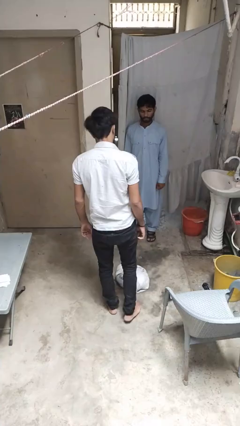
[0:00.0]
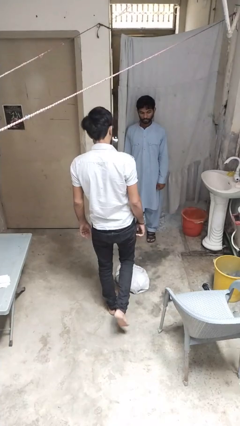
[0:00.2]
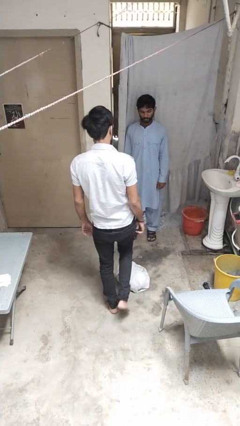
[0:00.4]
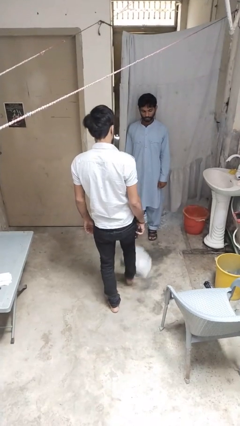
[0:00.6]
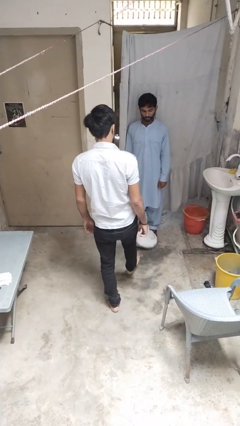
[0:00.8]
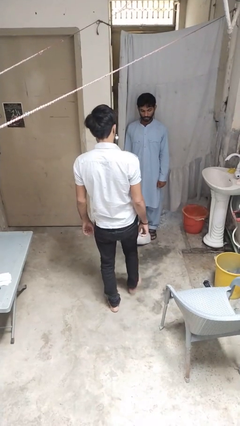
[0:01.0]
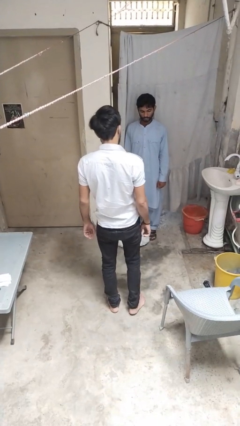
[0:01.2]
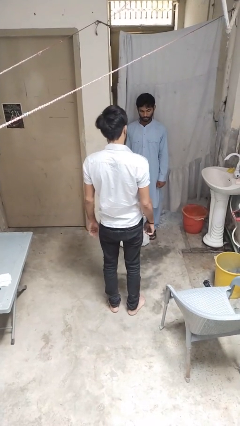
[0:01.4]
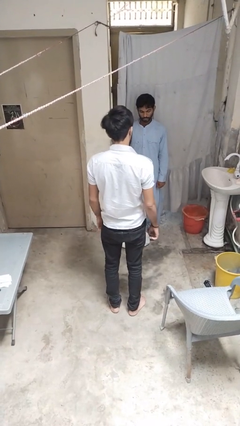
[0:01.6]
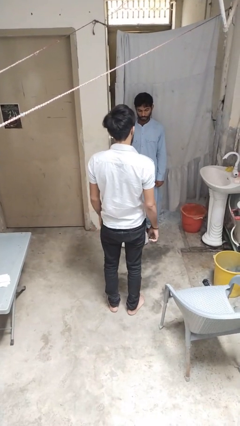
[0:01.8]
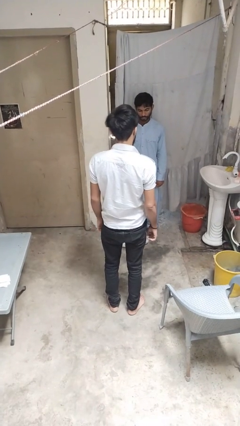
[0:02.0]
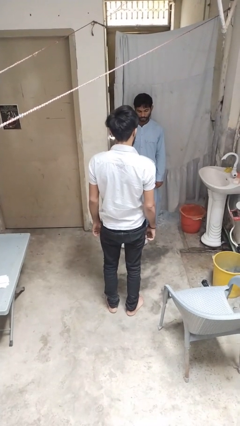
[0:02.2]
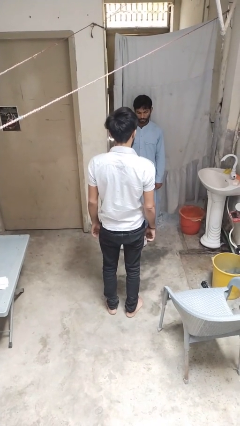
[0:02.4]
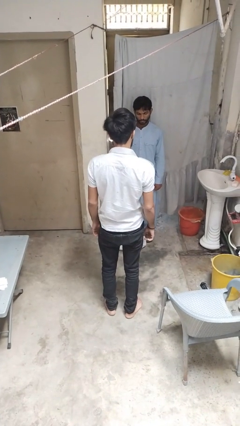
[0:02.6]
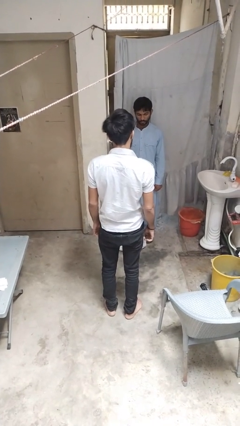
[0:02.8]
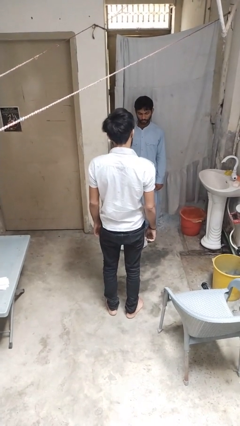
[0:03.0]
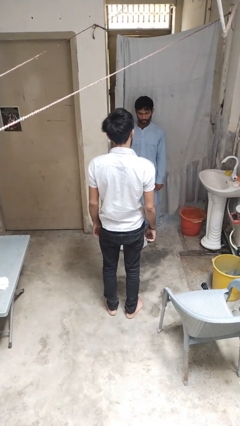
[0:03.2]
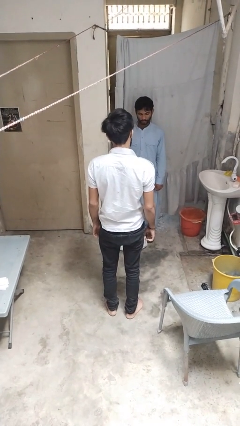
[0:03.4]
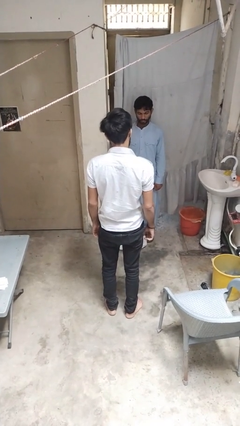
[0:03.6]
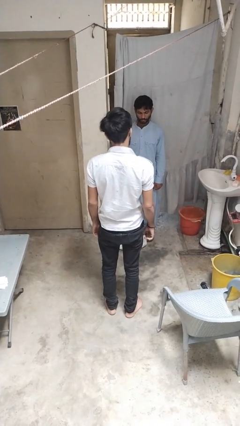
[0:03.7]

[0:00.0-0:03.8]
person kicks object to person

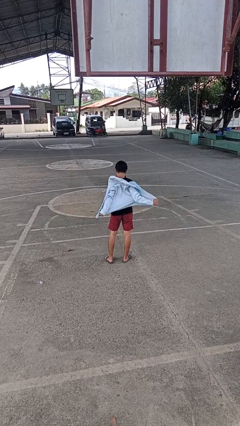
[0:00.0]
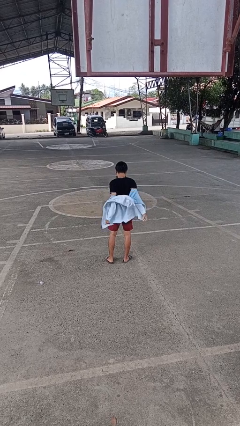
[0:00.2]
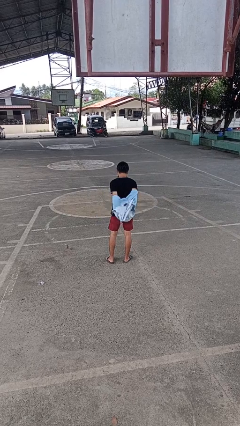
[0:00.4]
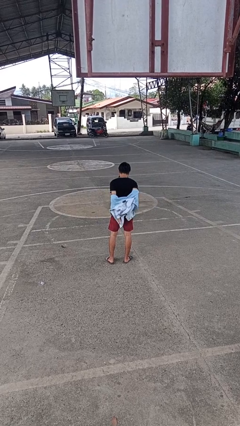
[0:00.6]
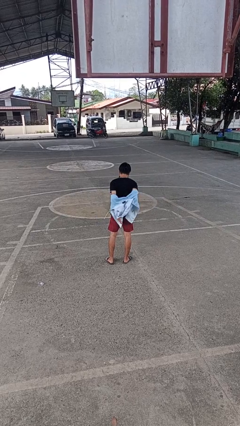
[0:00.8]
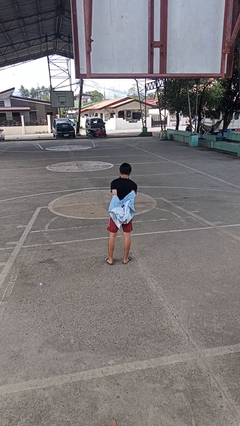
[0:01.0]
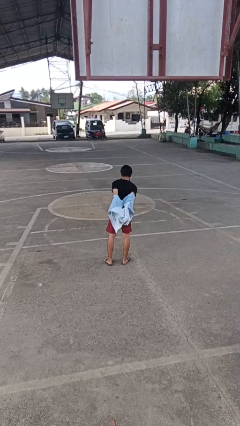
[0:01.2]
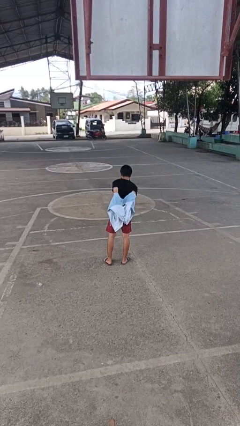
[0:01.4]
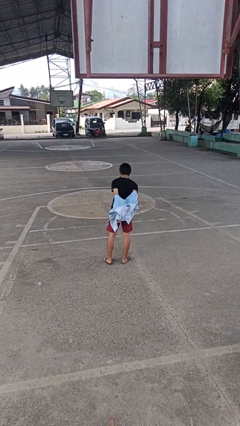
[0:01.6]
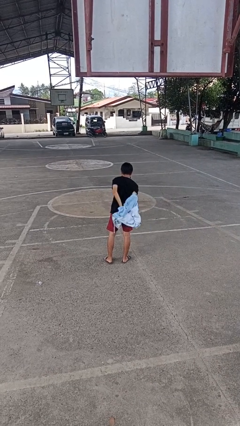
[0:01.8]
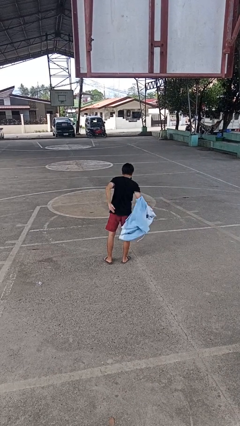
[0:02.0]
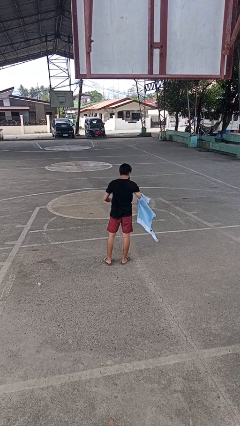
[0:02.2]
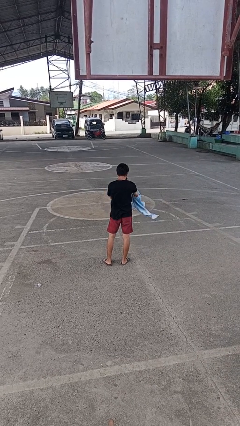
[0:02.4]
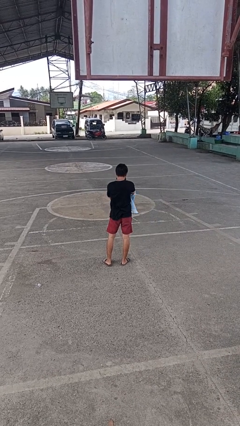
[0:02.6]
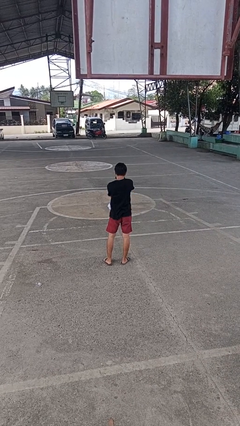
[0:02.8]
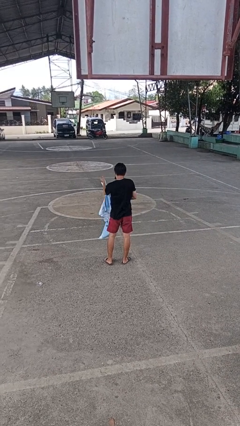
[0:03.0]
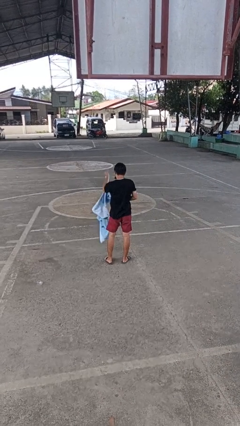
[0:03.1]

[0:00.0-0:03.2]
person takes off jacket

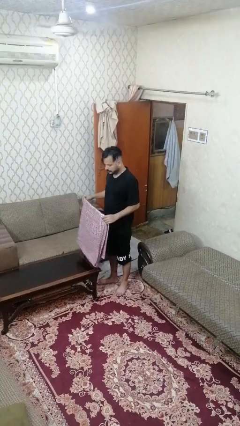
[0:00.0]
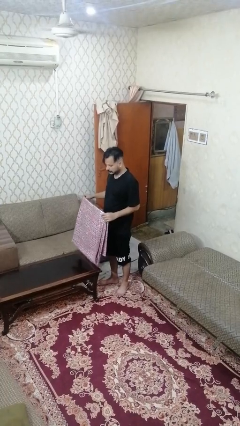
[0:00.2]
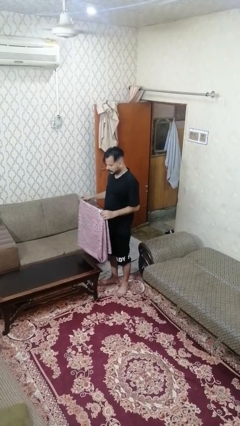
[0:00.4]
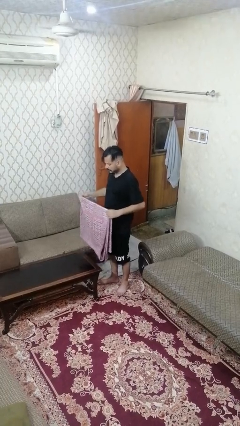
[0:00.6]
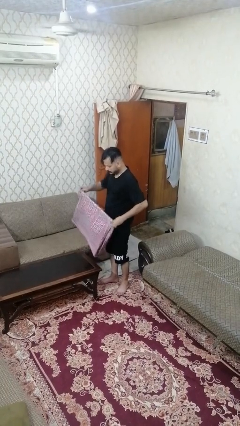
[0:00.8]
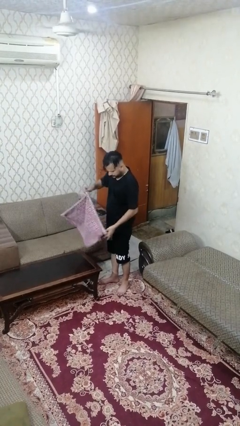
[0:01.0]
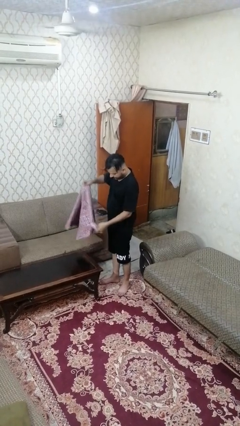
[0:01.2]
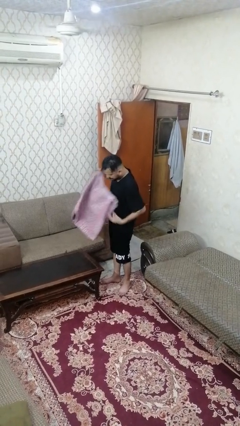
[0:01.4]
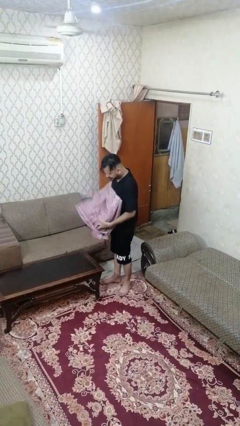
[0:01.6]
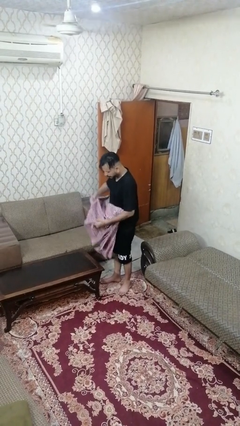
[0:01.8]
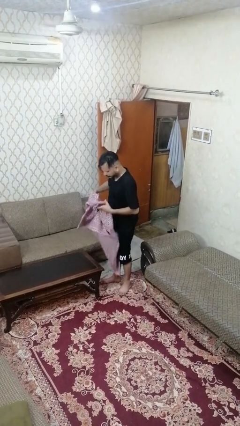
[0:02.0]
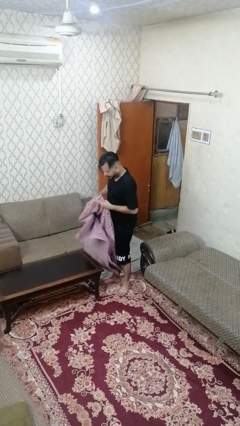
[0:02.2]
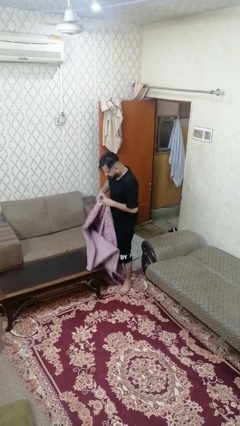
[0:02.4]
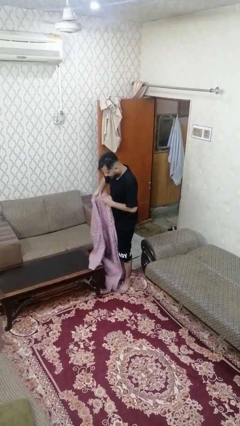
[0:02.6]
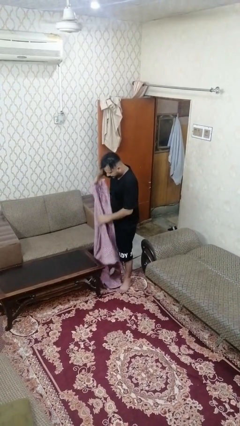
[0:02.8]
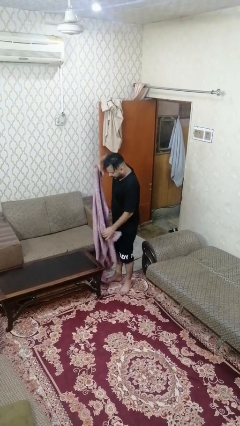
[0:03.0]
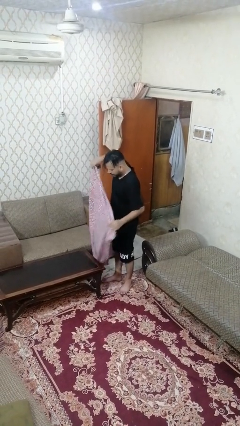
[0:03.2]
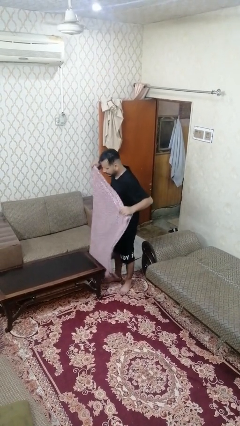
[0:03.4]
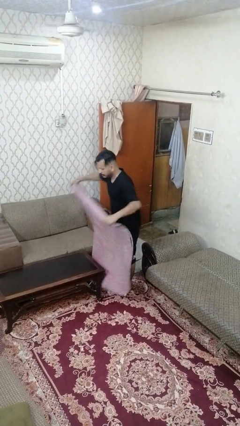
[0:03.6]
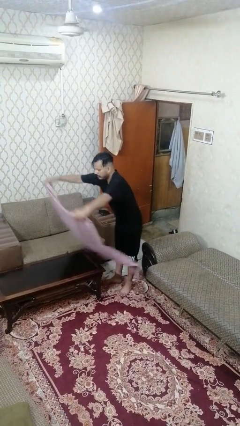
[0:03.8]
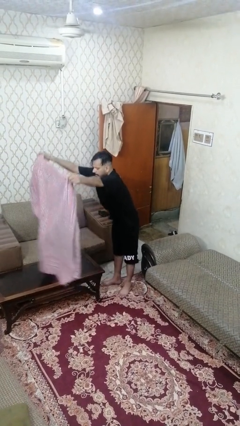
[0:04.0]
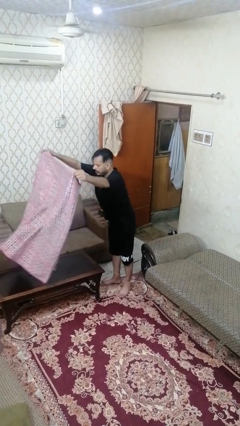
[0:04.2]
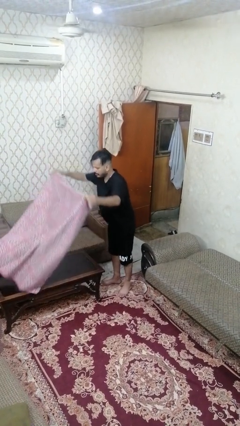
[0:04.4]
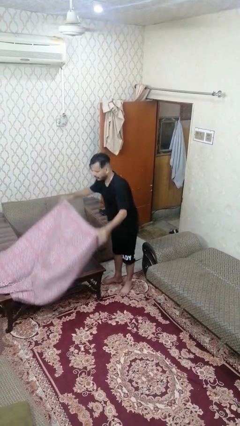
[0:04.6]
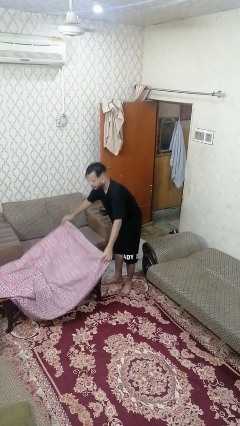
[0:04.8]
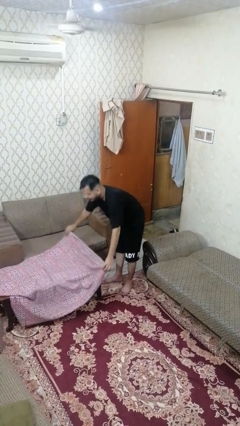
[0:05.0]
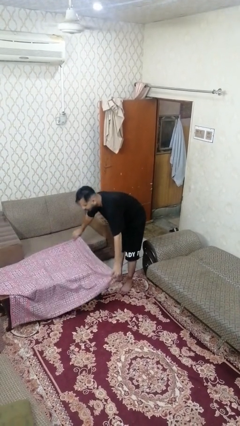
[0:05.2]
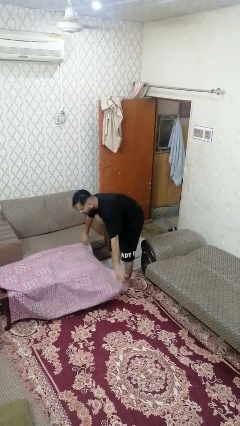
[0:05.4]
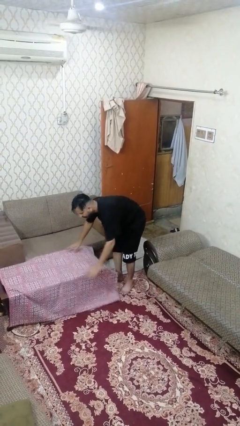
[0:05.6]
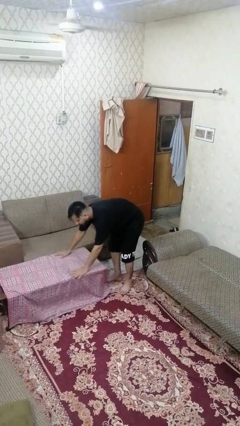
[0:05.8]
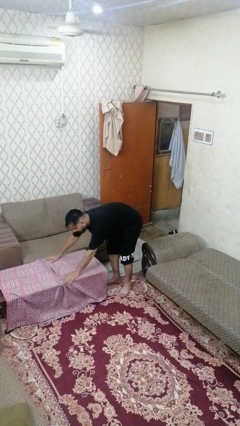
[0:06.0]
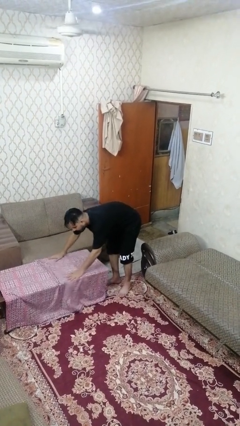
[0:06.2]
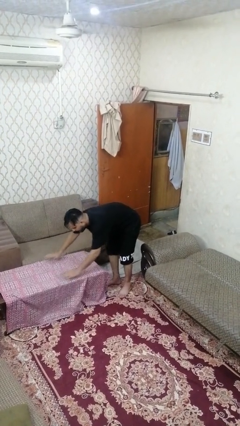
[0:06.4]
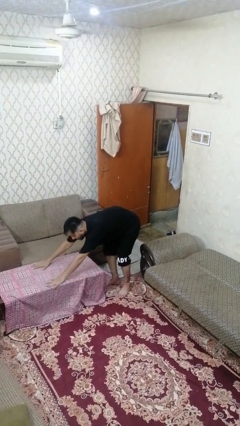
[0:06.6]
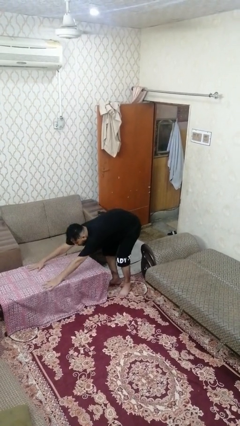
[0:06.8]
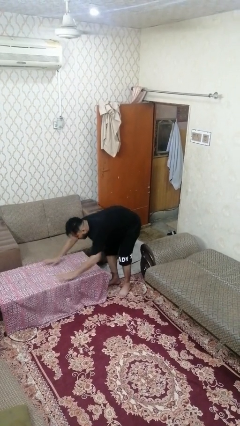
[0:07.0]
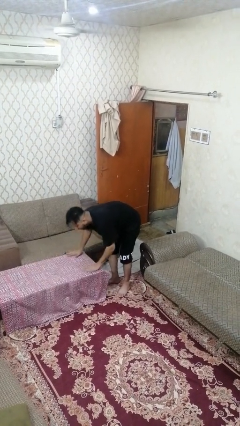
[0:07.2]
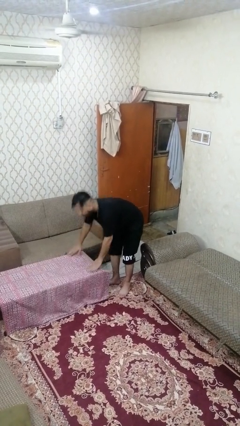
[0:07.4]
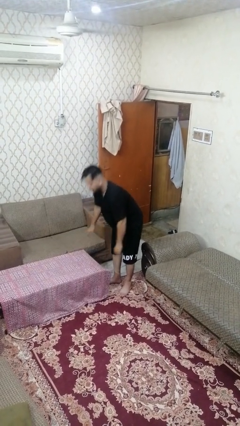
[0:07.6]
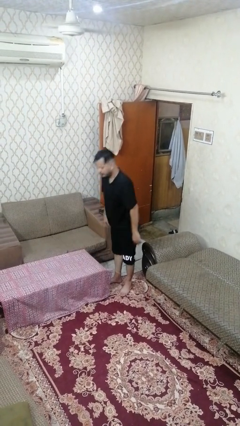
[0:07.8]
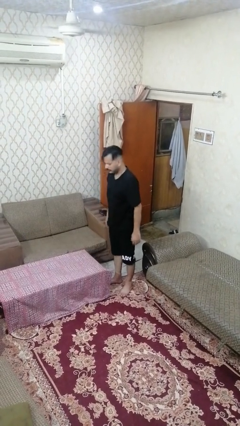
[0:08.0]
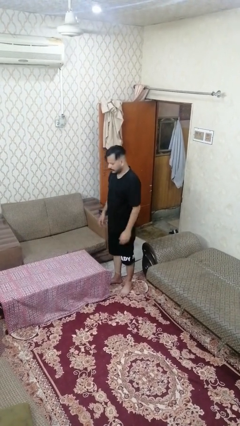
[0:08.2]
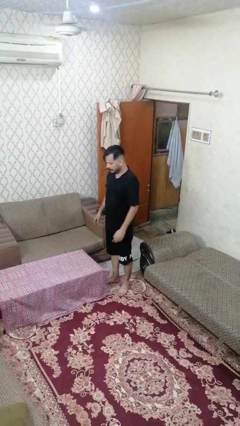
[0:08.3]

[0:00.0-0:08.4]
person spreads tablecloth

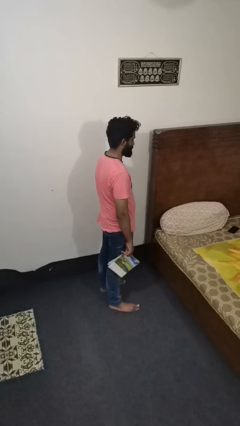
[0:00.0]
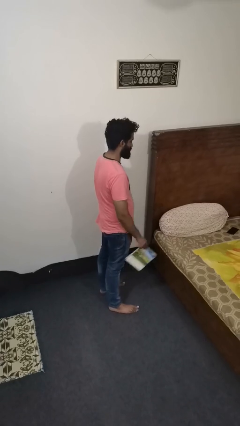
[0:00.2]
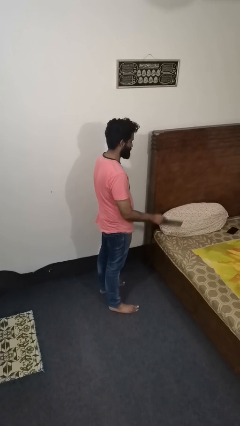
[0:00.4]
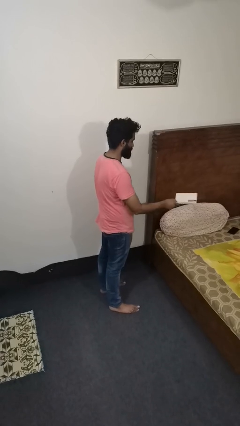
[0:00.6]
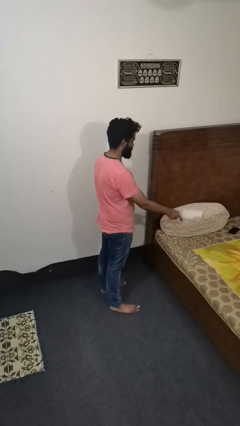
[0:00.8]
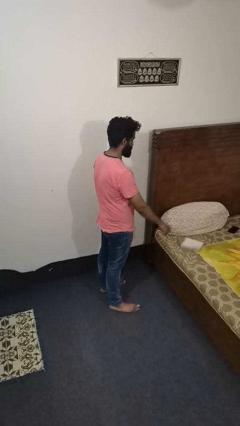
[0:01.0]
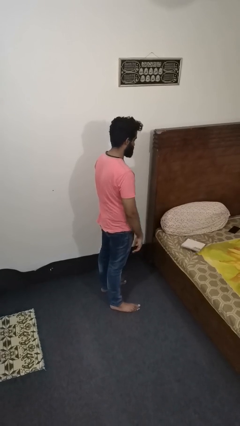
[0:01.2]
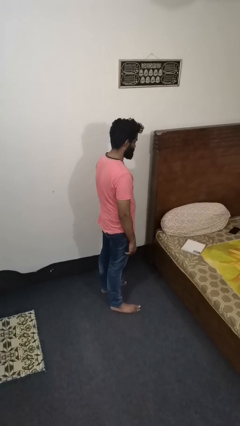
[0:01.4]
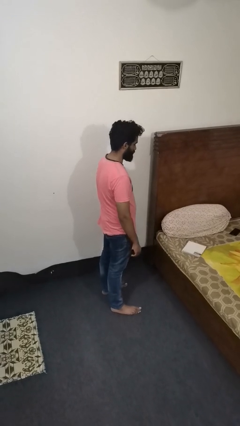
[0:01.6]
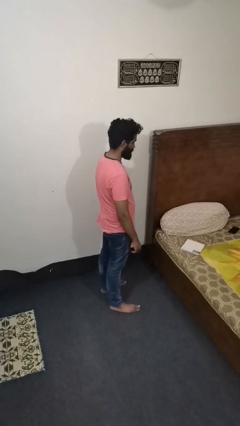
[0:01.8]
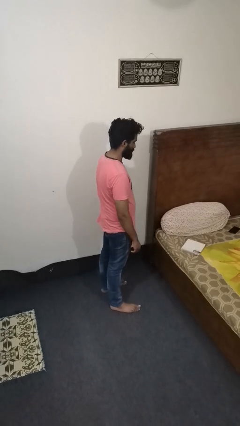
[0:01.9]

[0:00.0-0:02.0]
person throws object on bed
